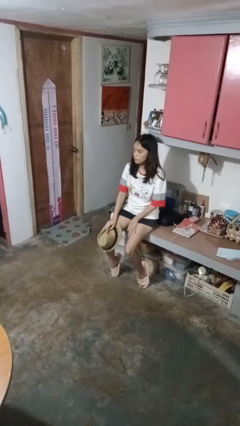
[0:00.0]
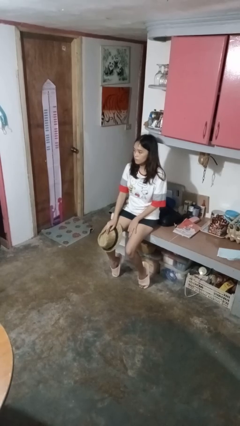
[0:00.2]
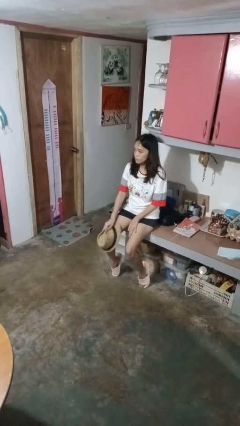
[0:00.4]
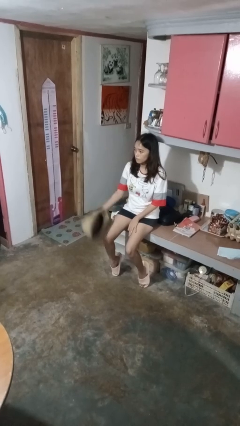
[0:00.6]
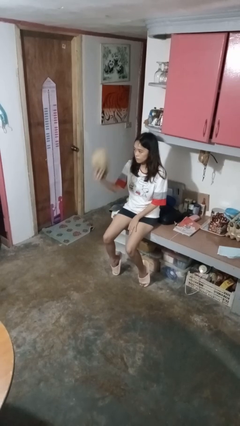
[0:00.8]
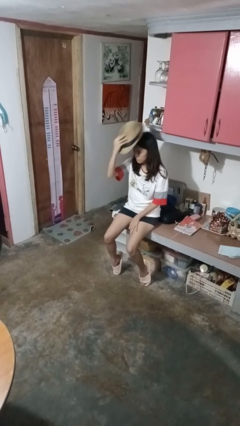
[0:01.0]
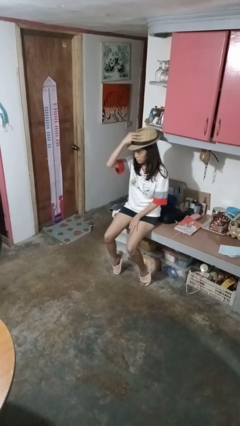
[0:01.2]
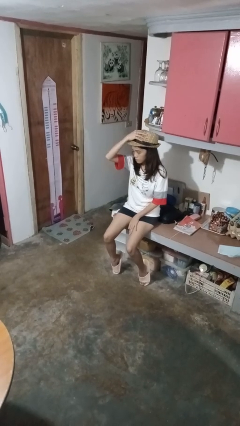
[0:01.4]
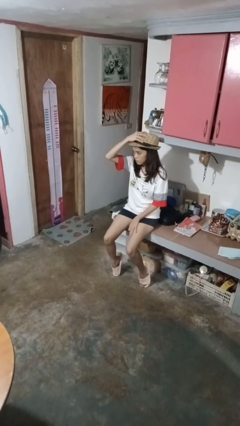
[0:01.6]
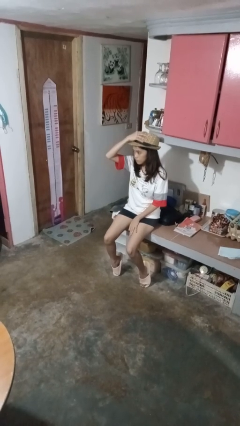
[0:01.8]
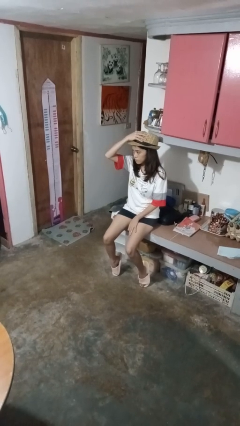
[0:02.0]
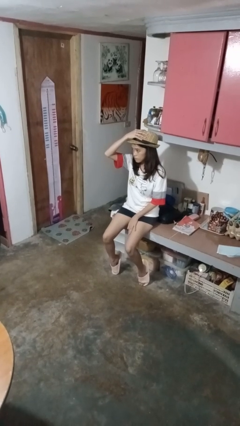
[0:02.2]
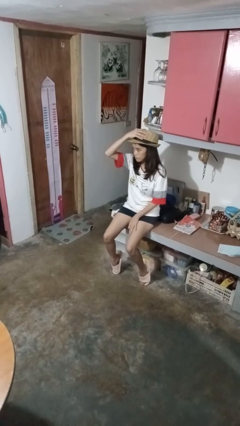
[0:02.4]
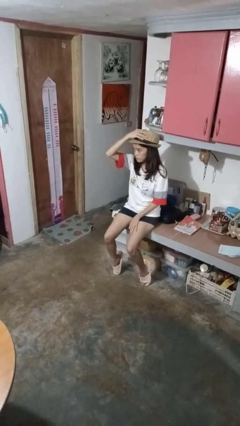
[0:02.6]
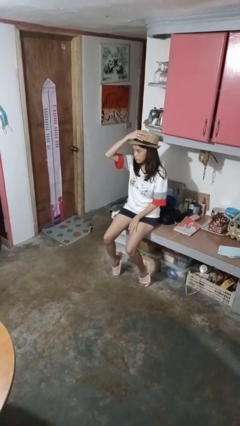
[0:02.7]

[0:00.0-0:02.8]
person puts on hat

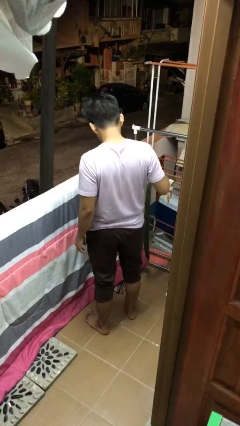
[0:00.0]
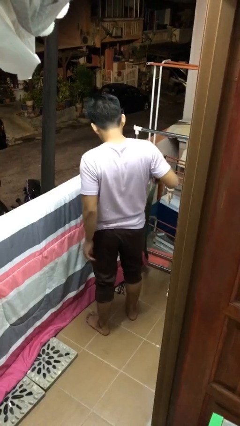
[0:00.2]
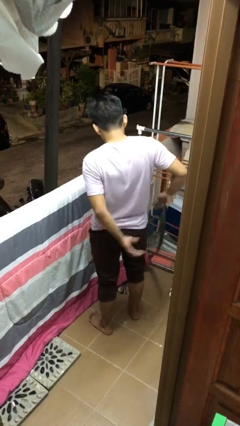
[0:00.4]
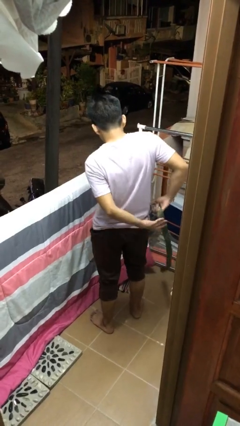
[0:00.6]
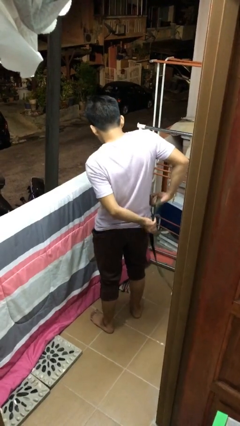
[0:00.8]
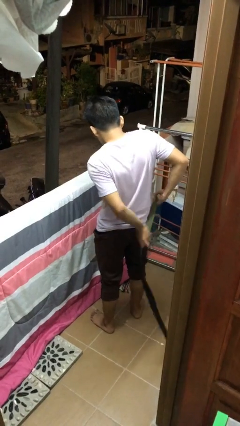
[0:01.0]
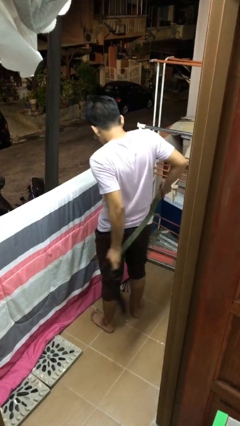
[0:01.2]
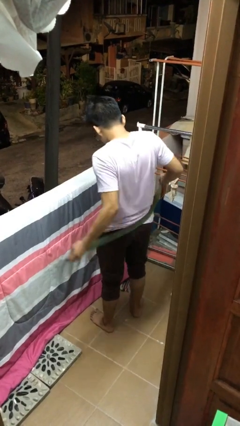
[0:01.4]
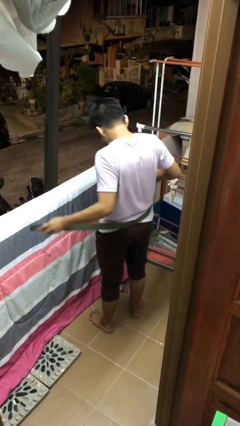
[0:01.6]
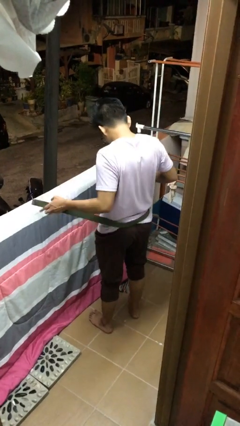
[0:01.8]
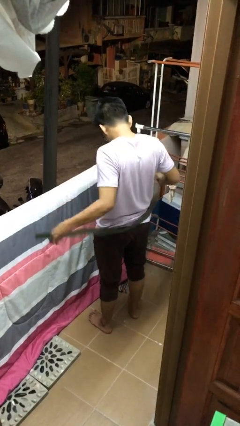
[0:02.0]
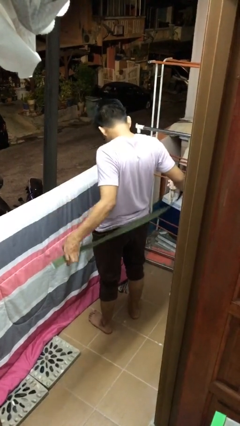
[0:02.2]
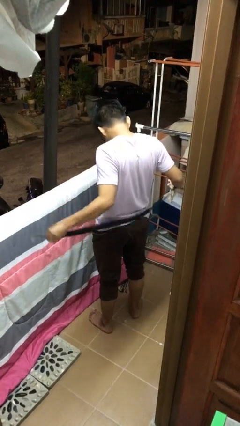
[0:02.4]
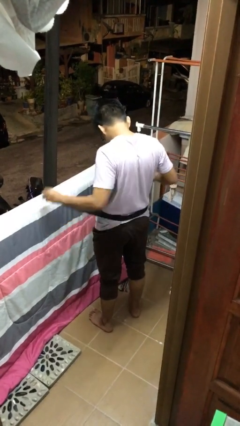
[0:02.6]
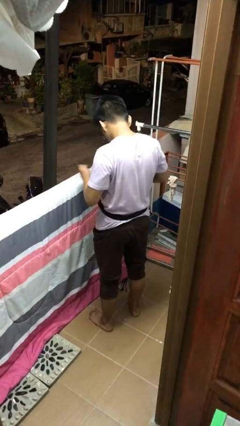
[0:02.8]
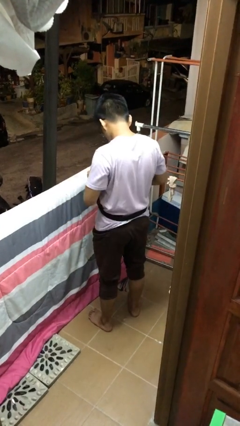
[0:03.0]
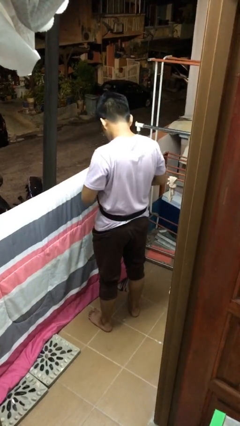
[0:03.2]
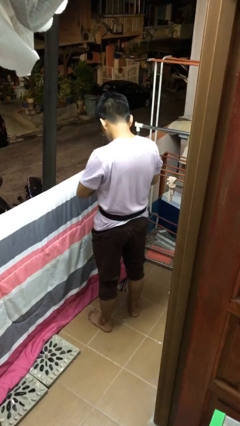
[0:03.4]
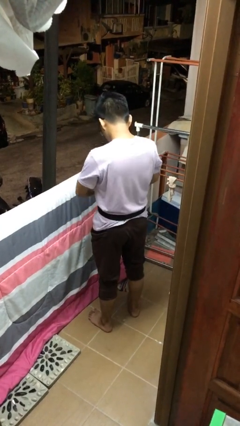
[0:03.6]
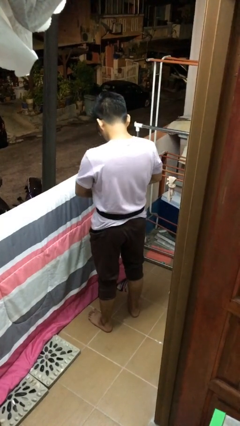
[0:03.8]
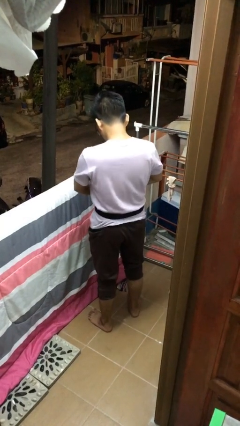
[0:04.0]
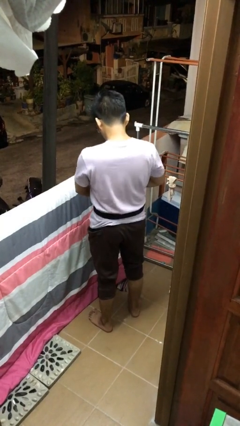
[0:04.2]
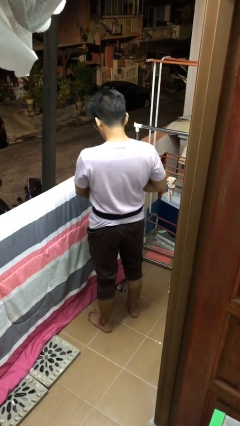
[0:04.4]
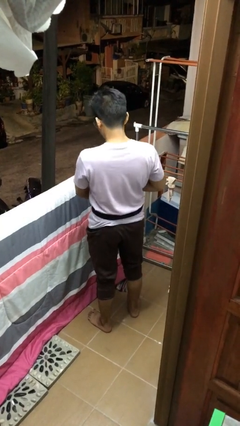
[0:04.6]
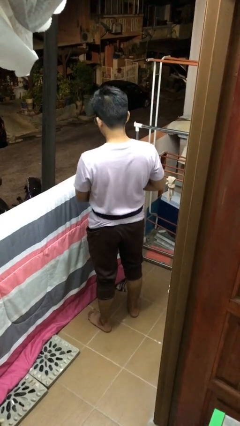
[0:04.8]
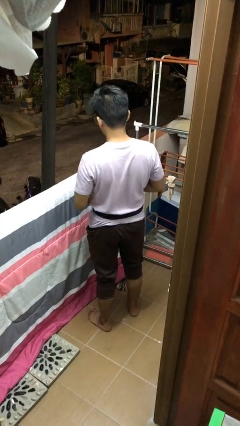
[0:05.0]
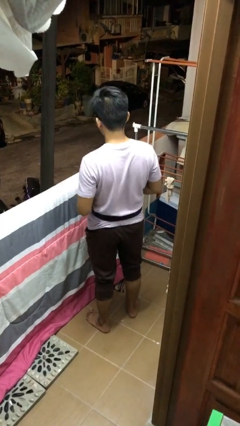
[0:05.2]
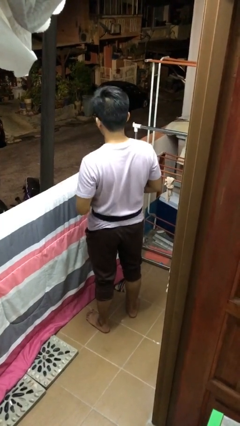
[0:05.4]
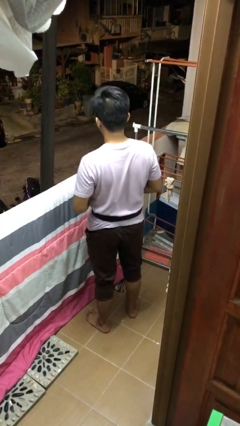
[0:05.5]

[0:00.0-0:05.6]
person puts on belt

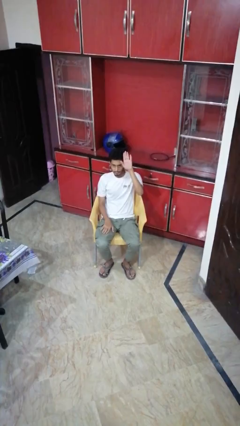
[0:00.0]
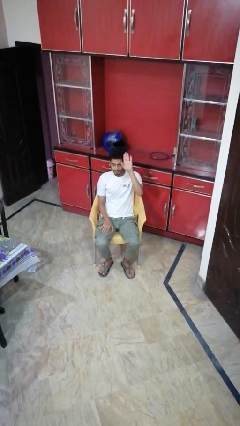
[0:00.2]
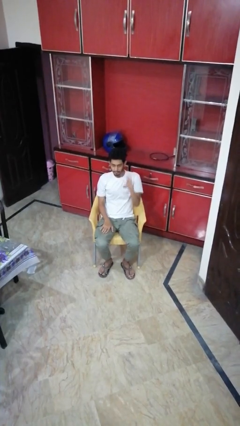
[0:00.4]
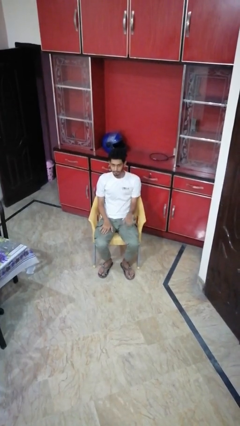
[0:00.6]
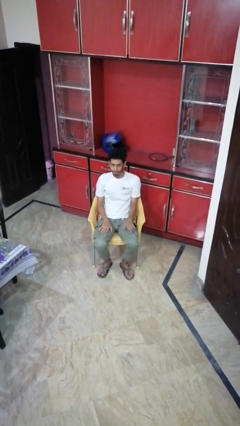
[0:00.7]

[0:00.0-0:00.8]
person gestures lower hand

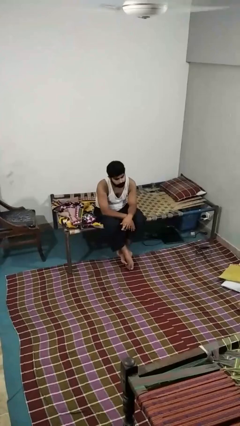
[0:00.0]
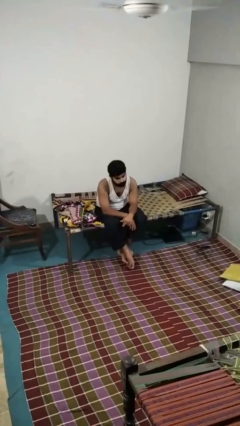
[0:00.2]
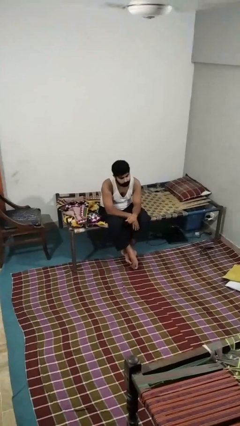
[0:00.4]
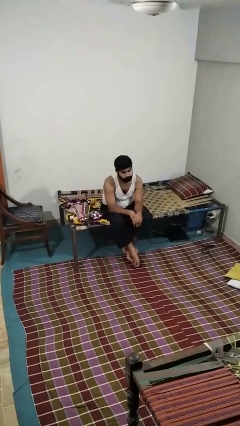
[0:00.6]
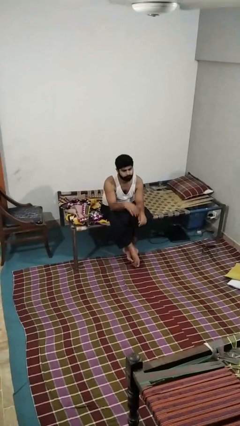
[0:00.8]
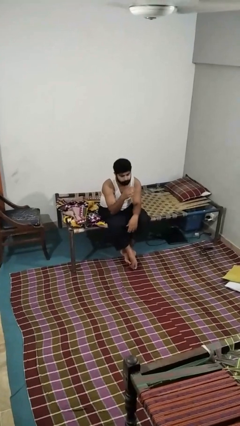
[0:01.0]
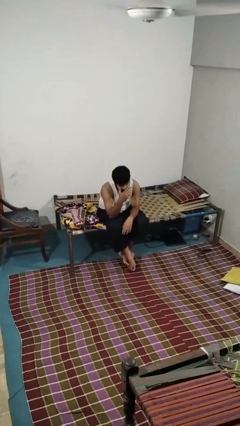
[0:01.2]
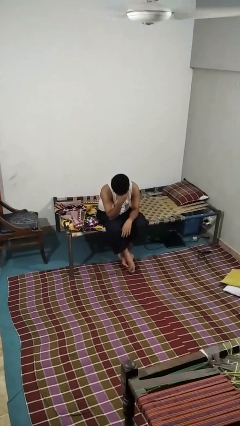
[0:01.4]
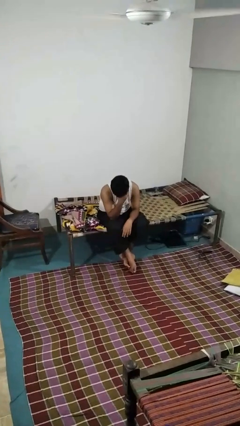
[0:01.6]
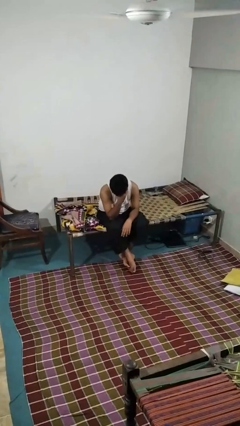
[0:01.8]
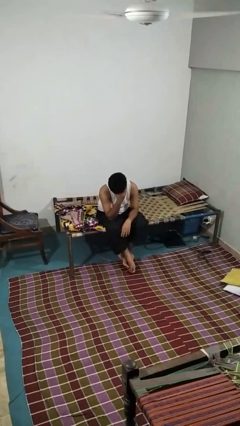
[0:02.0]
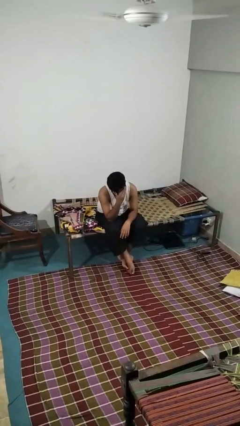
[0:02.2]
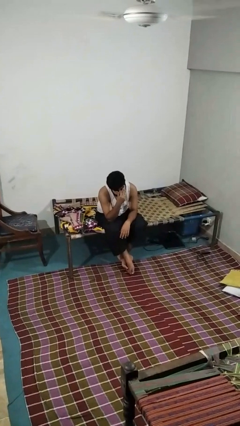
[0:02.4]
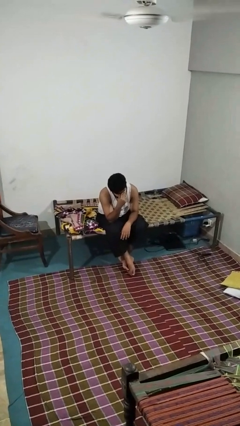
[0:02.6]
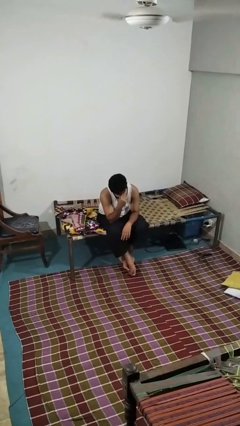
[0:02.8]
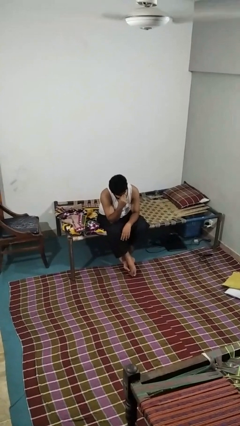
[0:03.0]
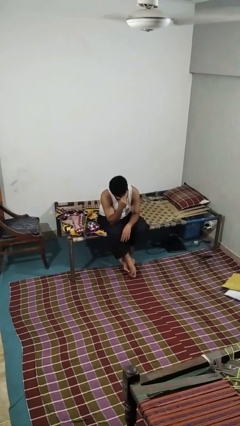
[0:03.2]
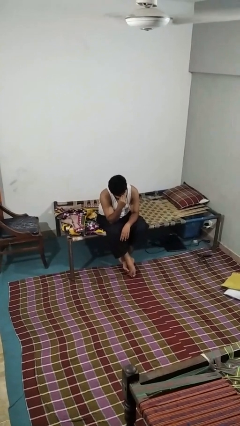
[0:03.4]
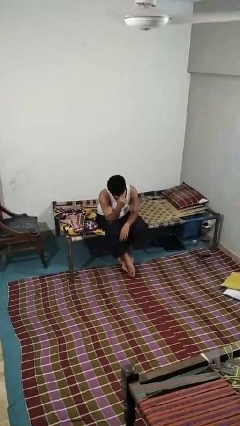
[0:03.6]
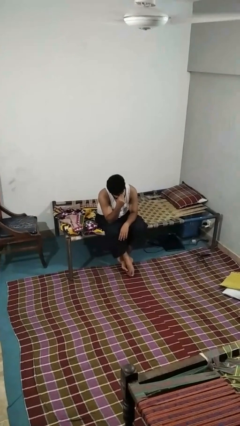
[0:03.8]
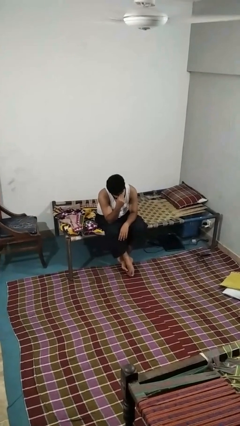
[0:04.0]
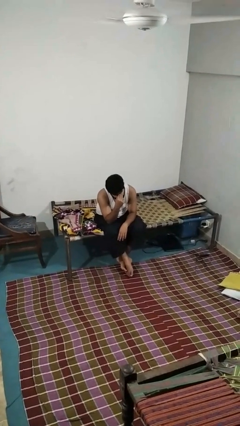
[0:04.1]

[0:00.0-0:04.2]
person covers face with hands

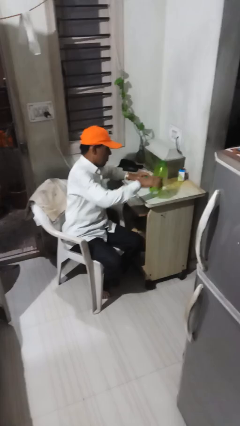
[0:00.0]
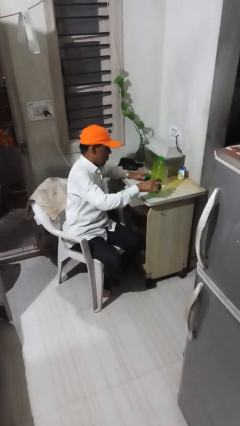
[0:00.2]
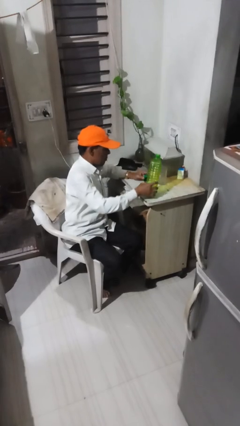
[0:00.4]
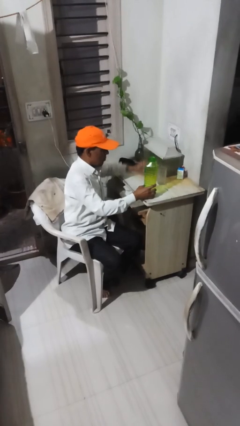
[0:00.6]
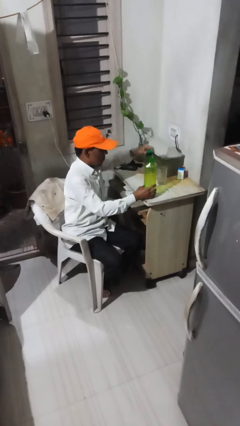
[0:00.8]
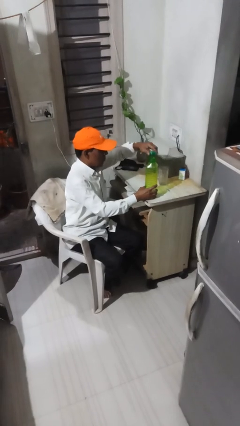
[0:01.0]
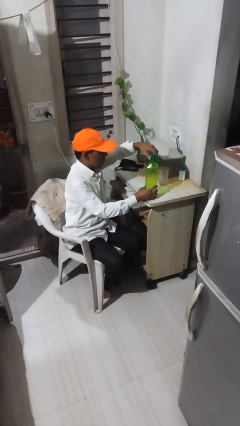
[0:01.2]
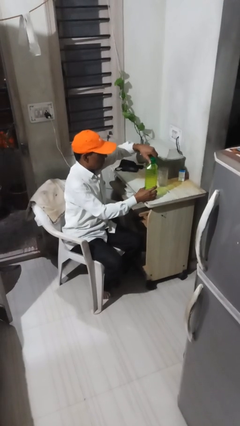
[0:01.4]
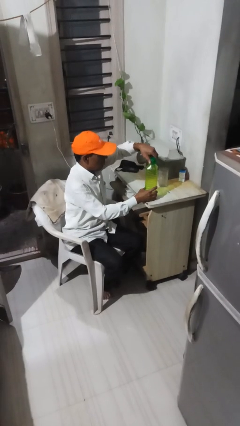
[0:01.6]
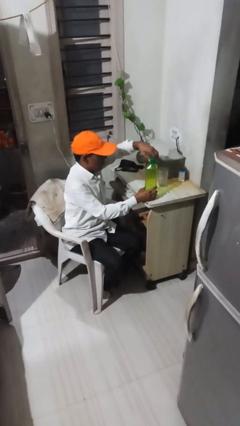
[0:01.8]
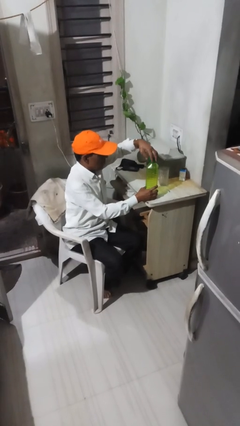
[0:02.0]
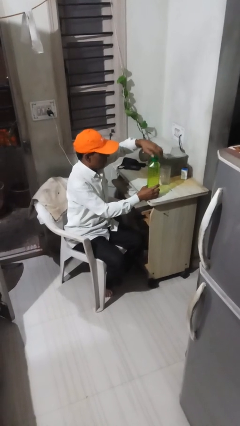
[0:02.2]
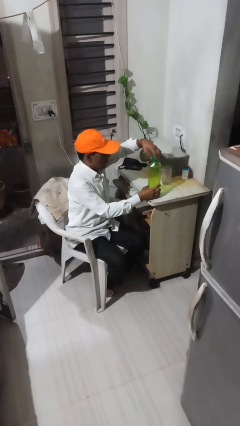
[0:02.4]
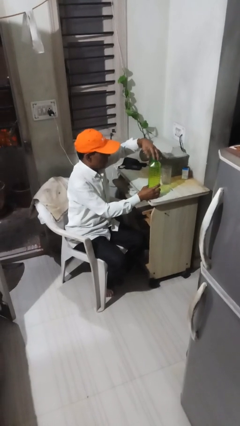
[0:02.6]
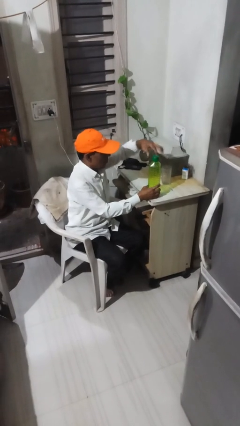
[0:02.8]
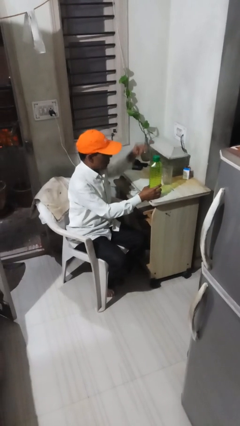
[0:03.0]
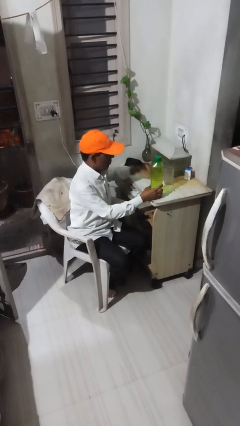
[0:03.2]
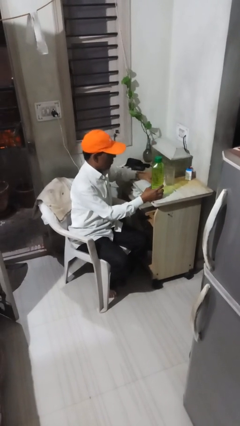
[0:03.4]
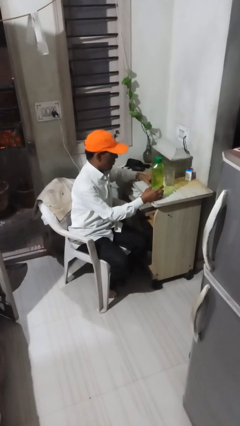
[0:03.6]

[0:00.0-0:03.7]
person screws lid to bottle

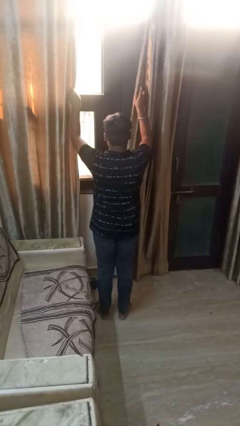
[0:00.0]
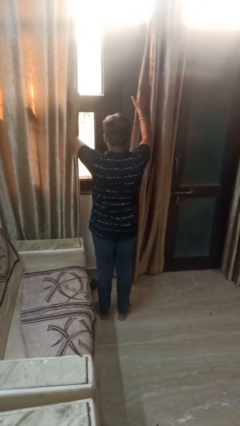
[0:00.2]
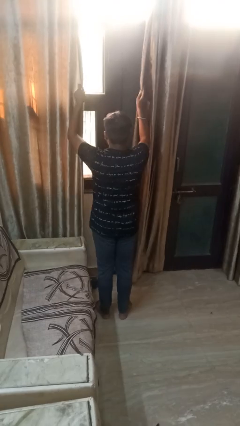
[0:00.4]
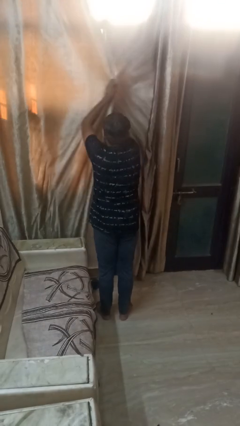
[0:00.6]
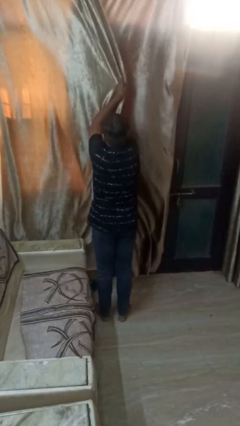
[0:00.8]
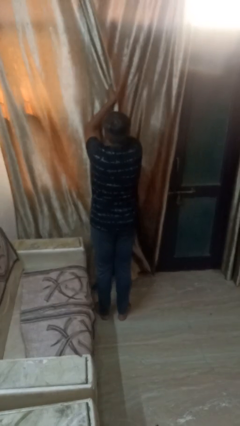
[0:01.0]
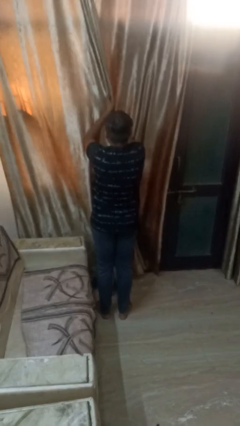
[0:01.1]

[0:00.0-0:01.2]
person closes curtains
